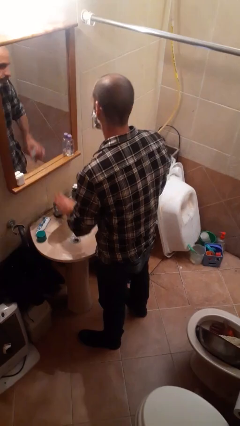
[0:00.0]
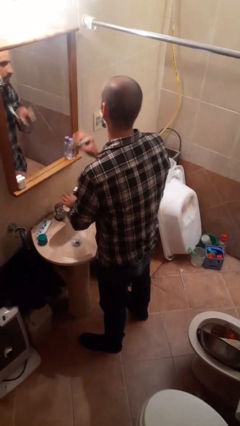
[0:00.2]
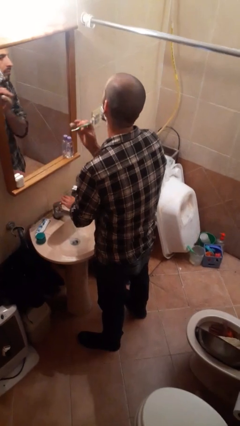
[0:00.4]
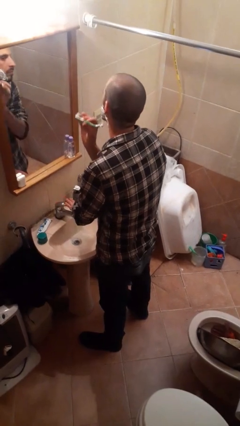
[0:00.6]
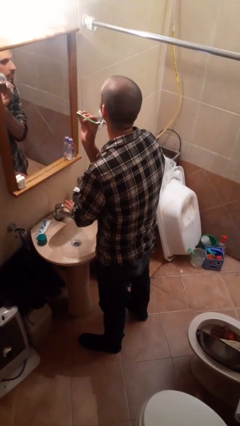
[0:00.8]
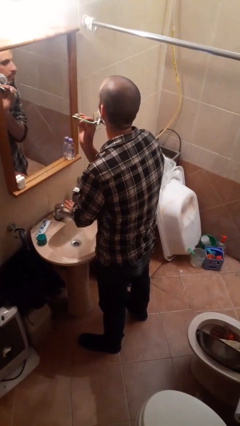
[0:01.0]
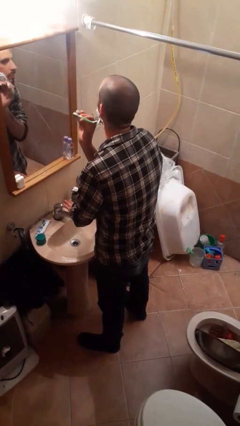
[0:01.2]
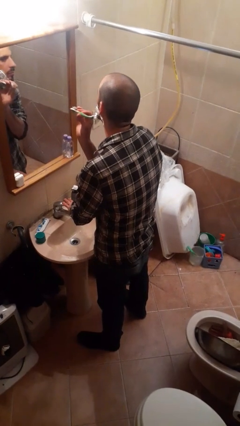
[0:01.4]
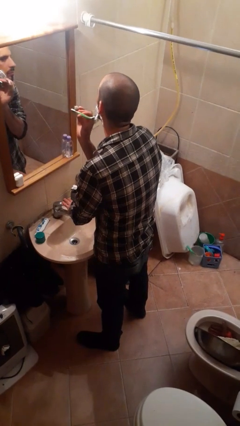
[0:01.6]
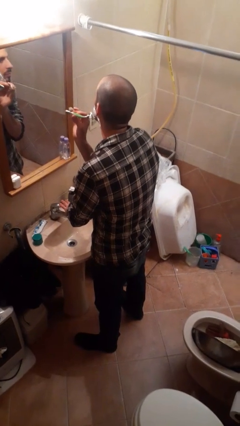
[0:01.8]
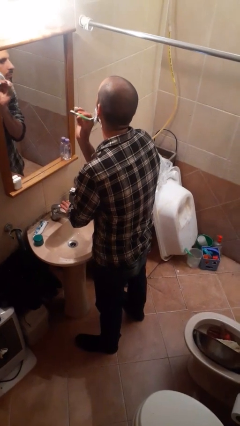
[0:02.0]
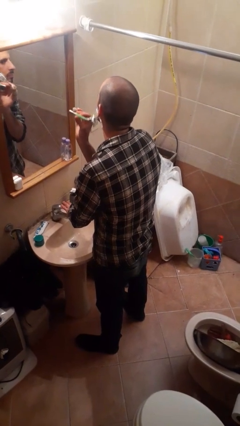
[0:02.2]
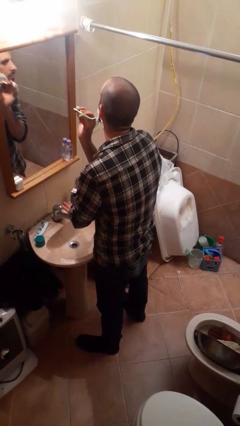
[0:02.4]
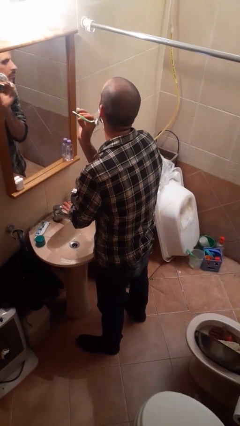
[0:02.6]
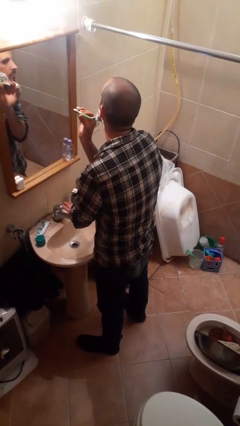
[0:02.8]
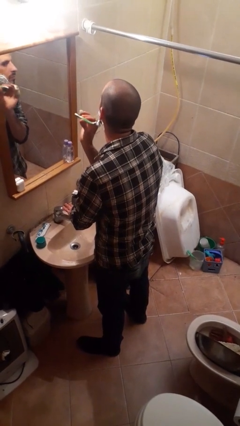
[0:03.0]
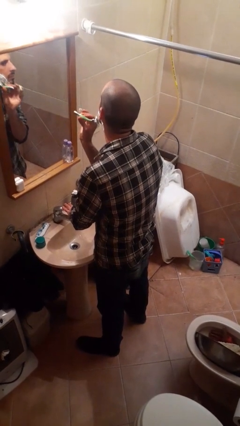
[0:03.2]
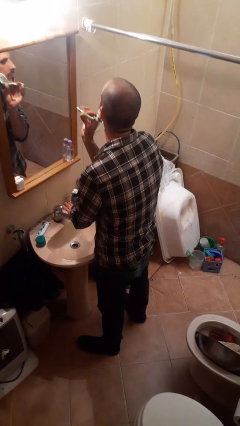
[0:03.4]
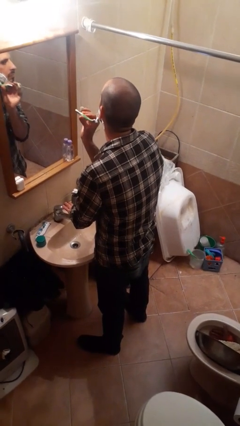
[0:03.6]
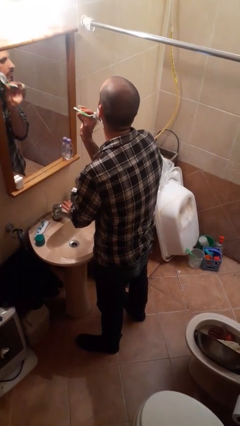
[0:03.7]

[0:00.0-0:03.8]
person shaves face

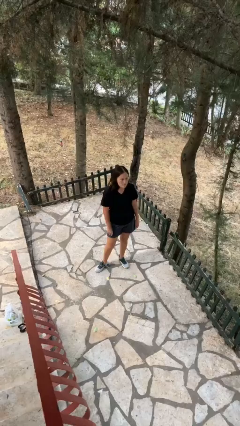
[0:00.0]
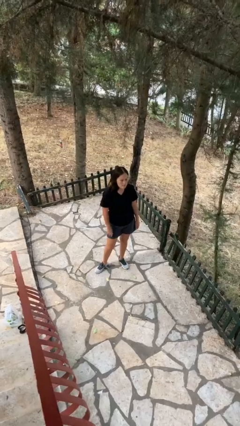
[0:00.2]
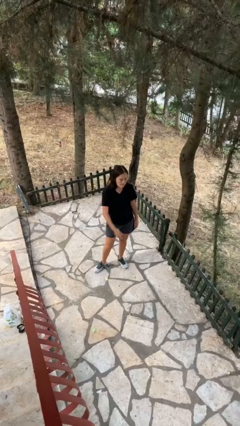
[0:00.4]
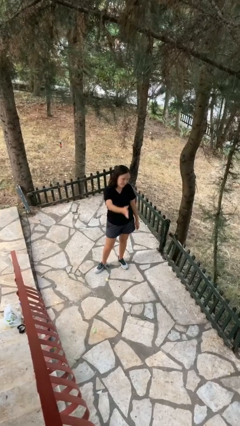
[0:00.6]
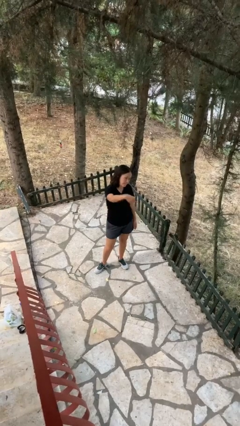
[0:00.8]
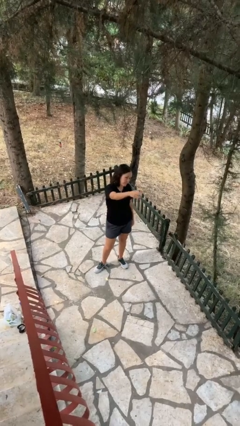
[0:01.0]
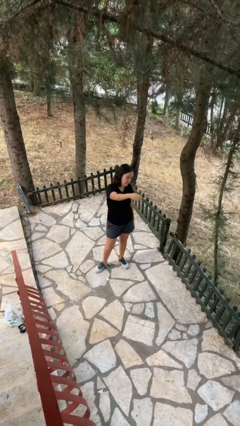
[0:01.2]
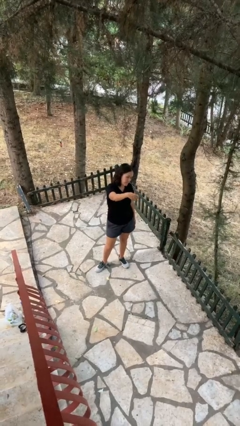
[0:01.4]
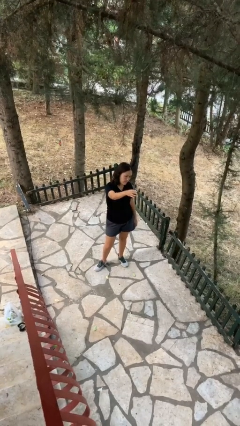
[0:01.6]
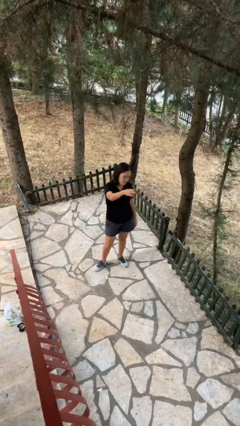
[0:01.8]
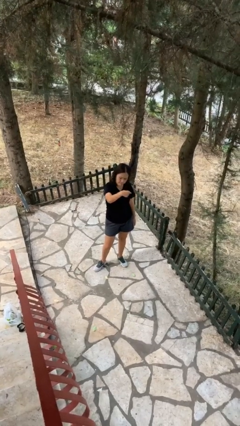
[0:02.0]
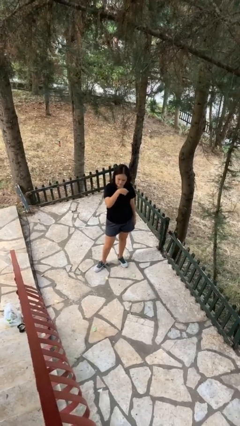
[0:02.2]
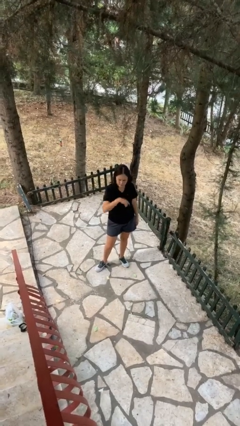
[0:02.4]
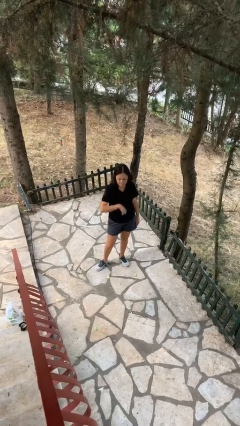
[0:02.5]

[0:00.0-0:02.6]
person gestures come here

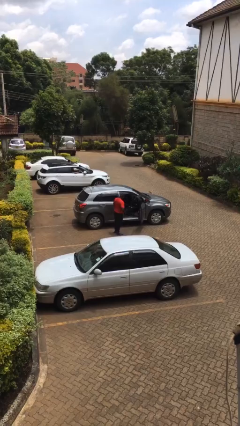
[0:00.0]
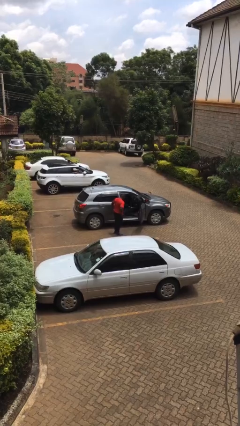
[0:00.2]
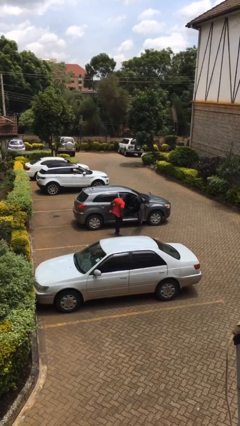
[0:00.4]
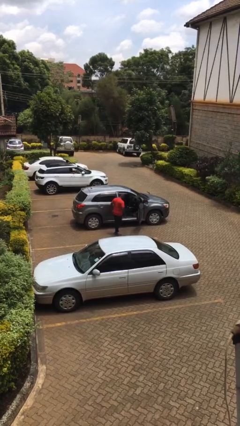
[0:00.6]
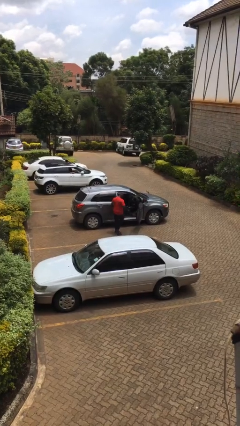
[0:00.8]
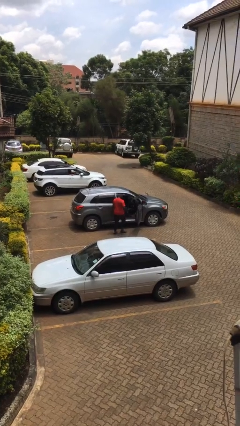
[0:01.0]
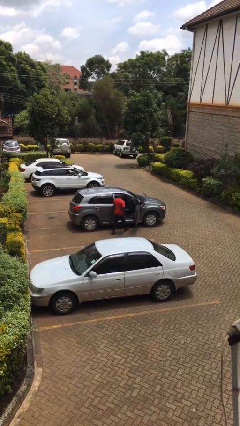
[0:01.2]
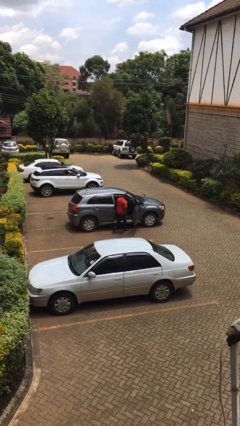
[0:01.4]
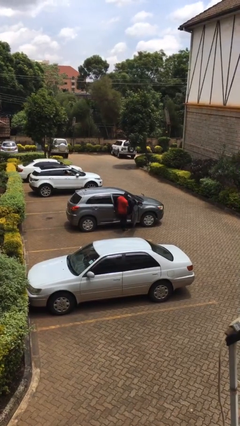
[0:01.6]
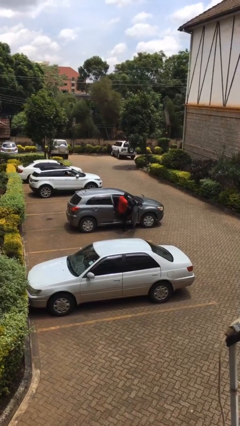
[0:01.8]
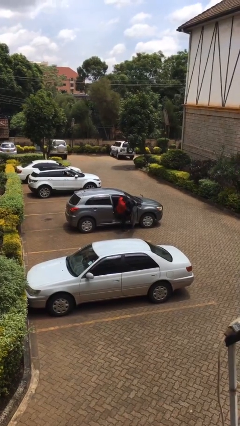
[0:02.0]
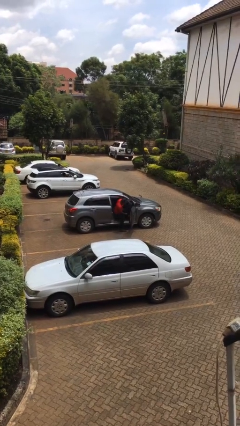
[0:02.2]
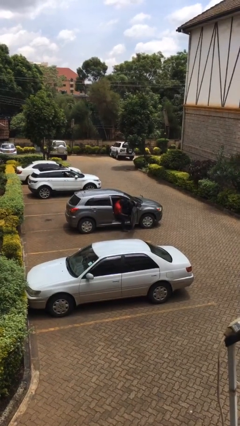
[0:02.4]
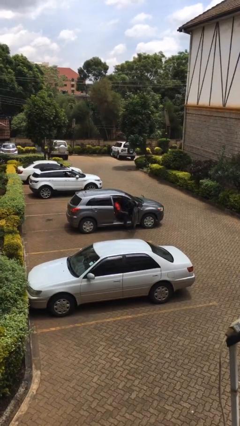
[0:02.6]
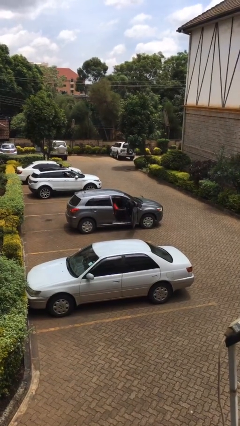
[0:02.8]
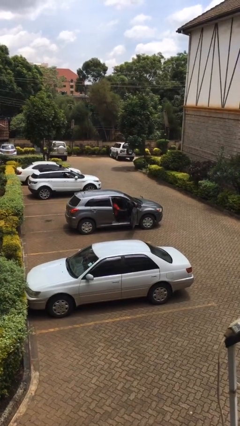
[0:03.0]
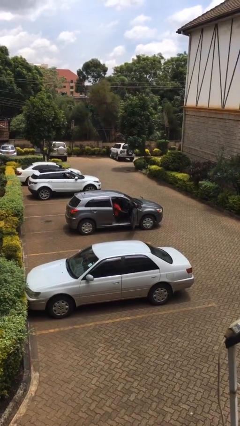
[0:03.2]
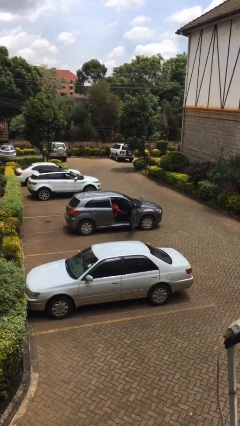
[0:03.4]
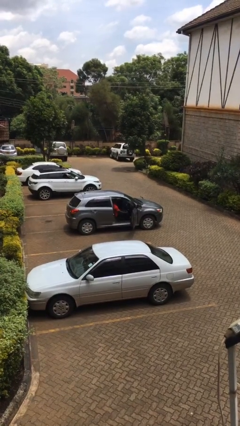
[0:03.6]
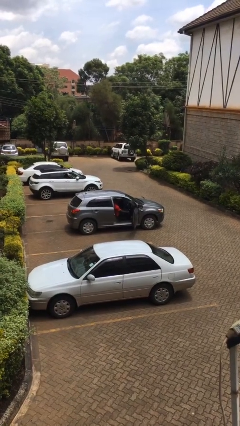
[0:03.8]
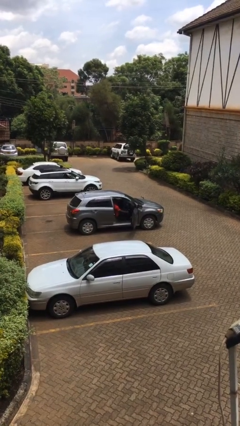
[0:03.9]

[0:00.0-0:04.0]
person enters car

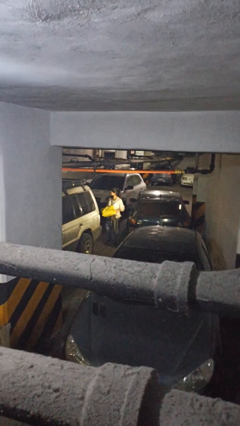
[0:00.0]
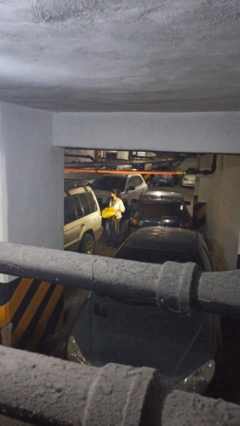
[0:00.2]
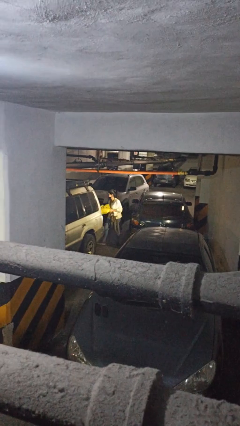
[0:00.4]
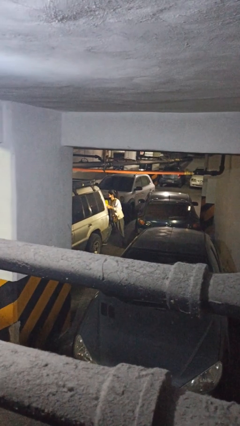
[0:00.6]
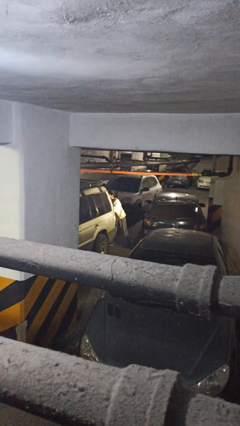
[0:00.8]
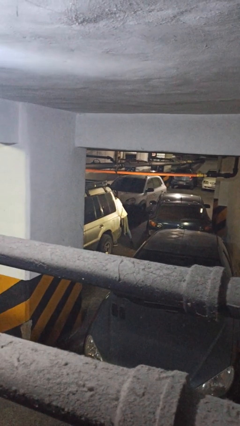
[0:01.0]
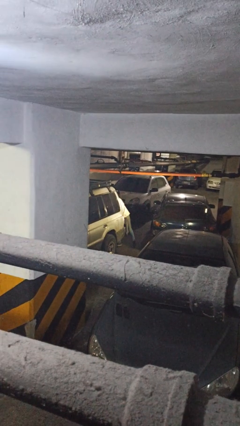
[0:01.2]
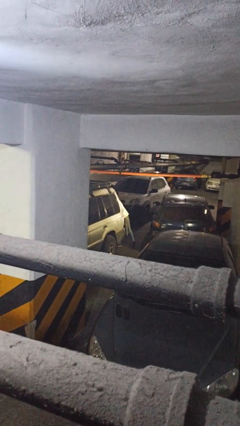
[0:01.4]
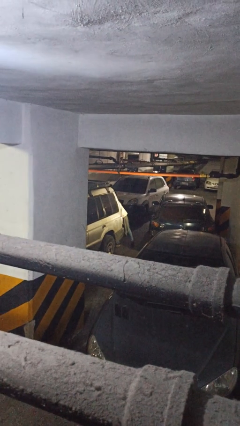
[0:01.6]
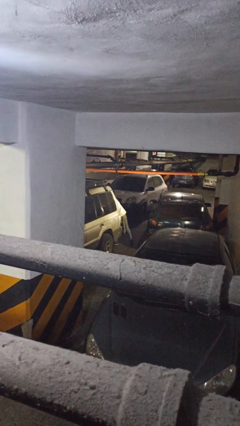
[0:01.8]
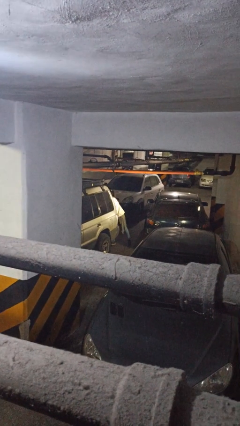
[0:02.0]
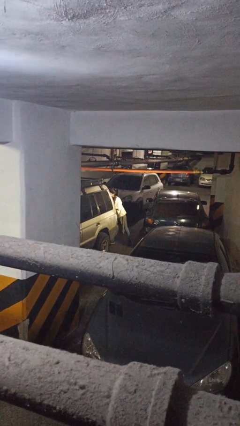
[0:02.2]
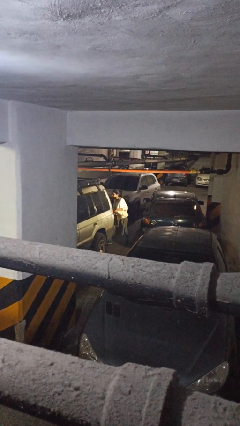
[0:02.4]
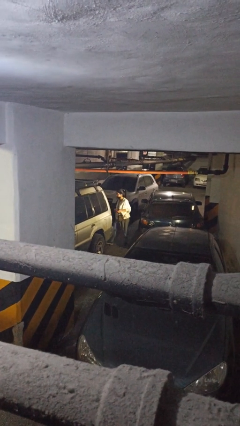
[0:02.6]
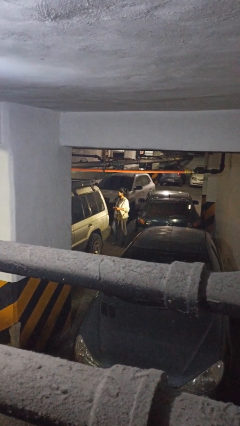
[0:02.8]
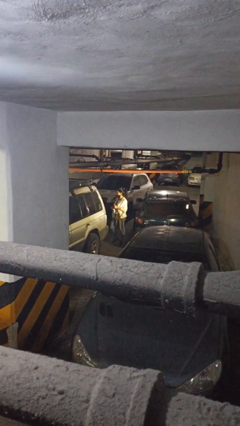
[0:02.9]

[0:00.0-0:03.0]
person loads car

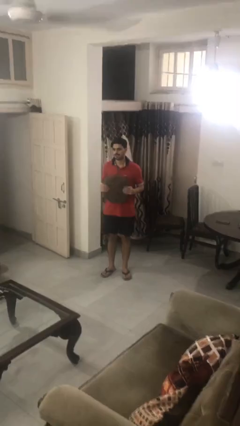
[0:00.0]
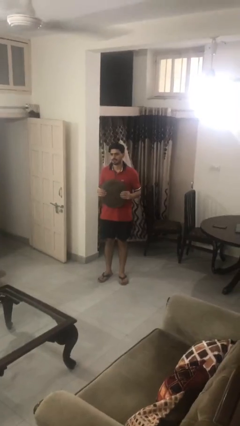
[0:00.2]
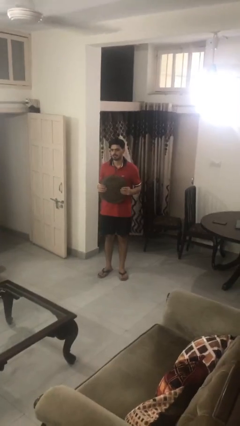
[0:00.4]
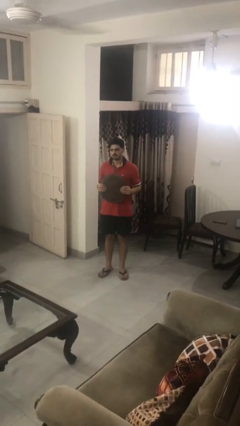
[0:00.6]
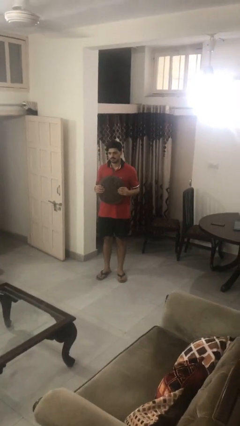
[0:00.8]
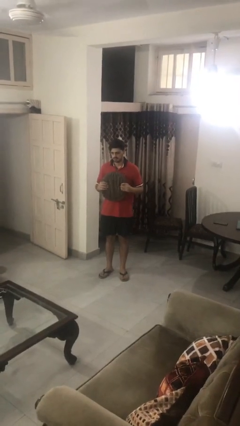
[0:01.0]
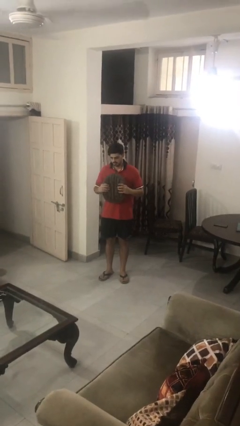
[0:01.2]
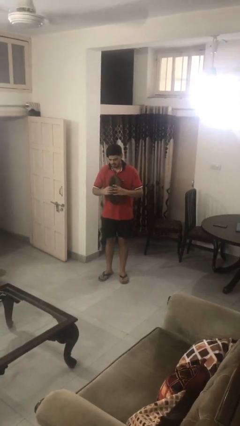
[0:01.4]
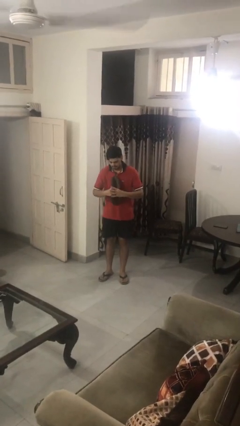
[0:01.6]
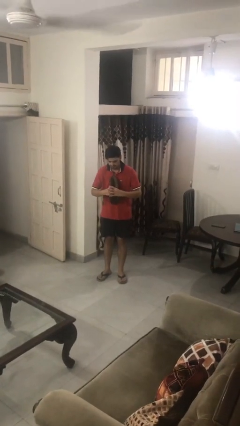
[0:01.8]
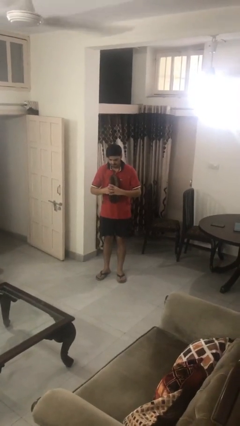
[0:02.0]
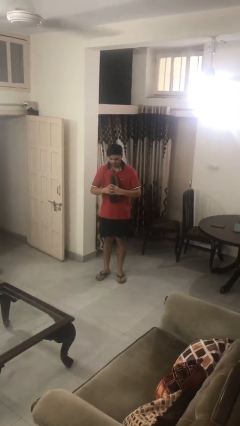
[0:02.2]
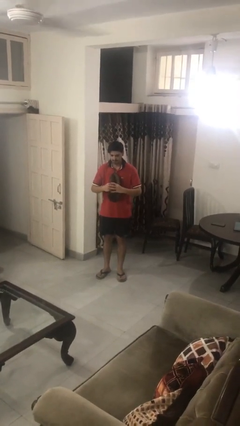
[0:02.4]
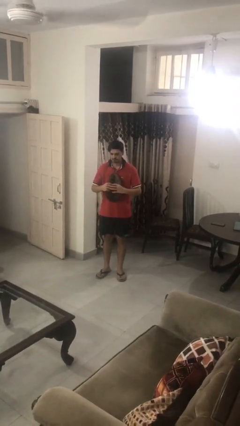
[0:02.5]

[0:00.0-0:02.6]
person squeezes object

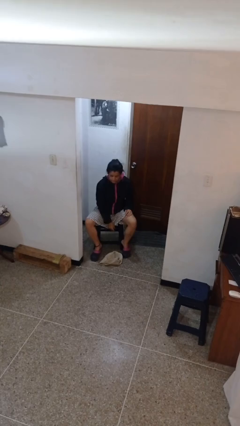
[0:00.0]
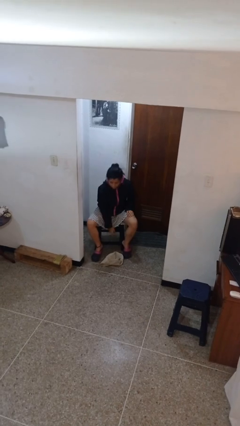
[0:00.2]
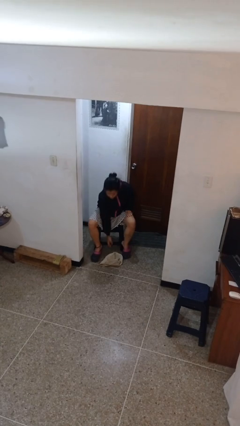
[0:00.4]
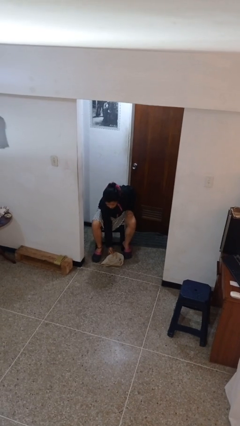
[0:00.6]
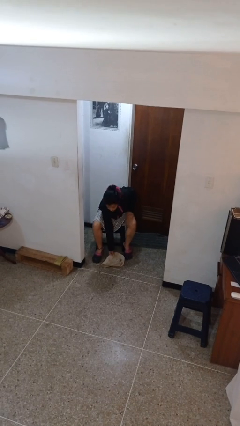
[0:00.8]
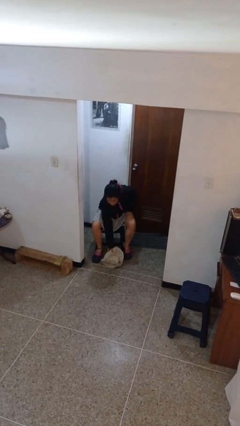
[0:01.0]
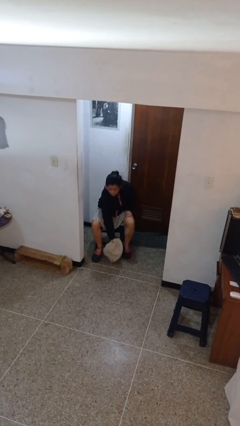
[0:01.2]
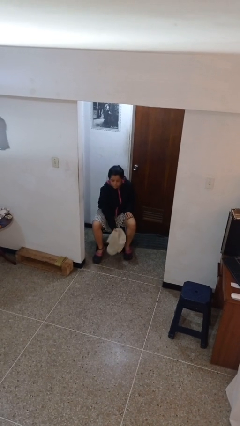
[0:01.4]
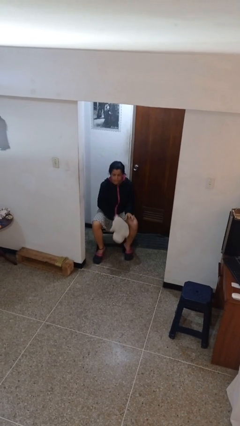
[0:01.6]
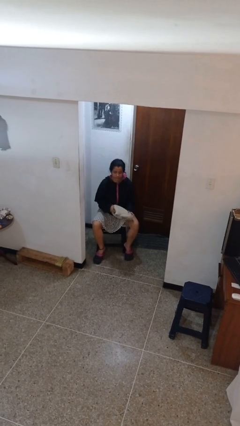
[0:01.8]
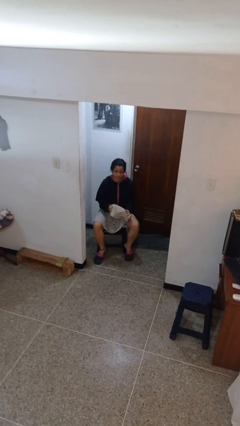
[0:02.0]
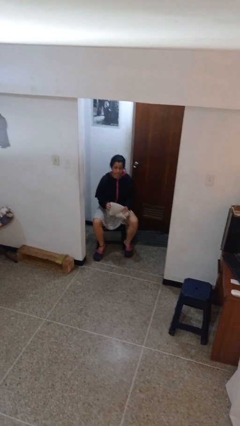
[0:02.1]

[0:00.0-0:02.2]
person picks up object from floor
